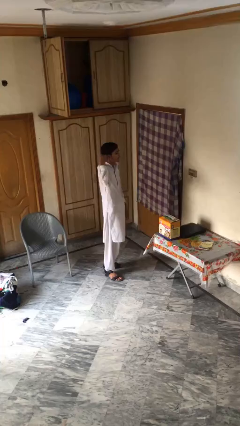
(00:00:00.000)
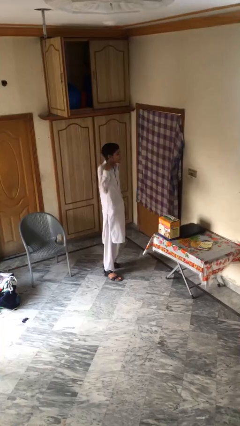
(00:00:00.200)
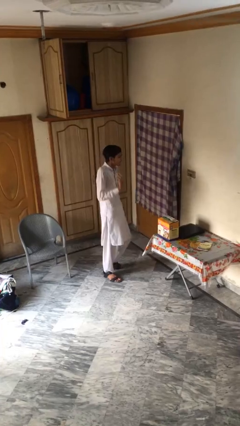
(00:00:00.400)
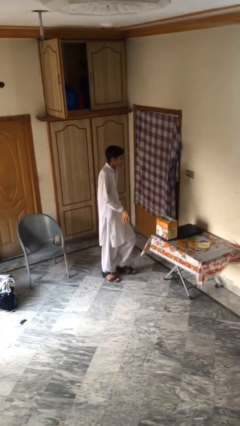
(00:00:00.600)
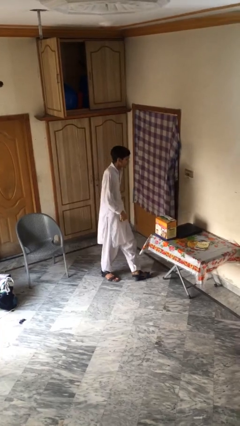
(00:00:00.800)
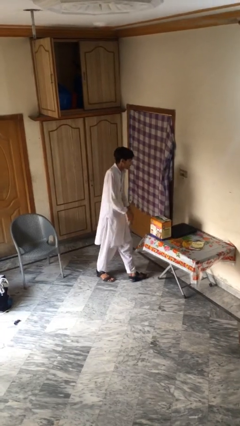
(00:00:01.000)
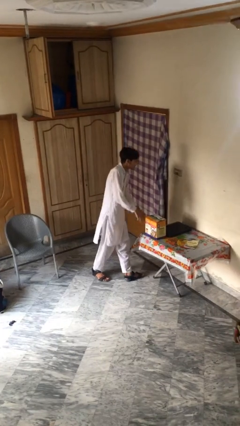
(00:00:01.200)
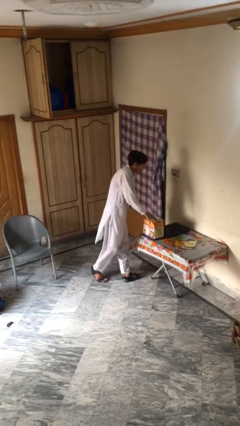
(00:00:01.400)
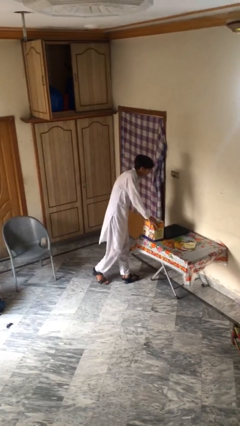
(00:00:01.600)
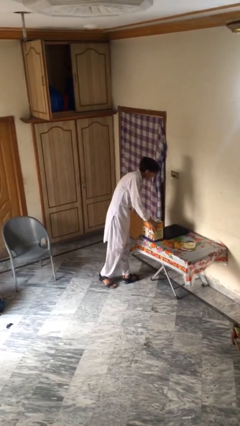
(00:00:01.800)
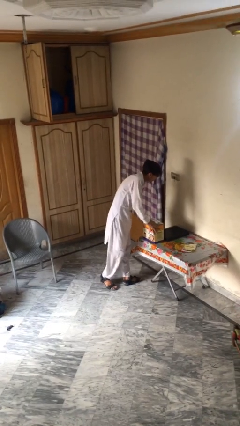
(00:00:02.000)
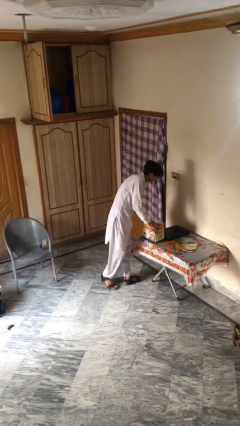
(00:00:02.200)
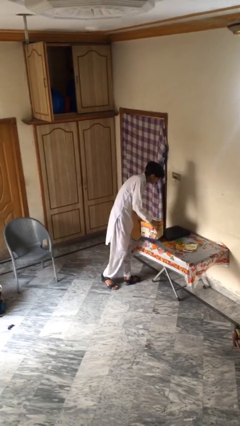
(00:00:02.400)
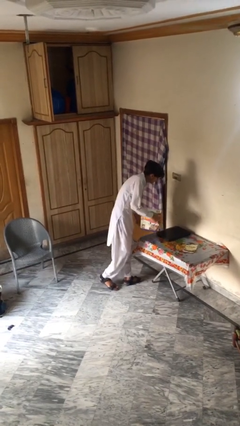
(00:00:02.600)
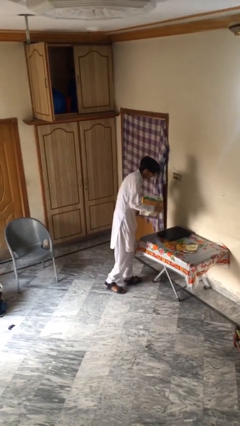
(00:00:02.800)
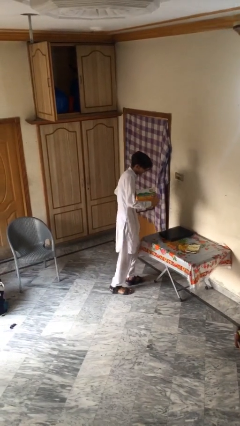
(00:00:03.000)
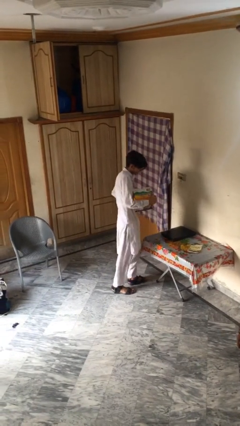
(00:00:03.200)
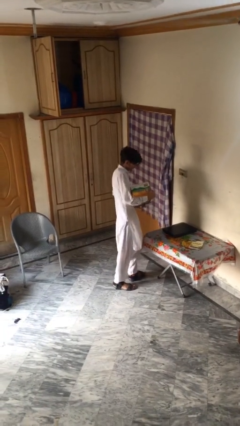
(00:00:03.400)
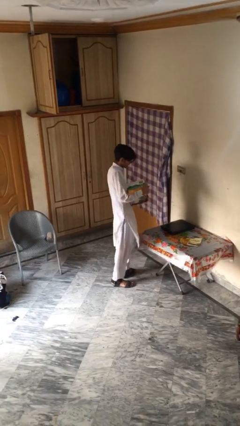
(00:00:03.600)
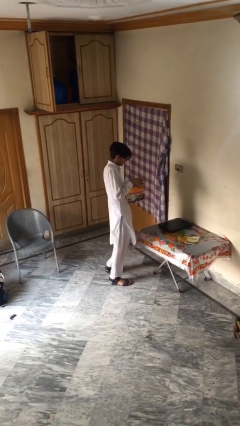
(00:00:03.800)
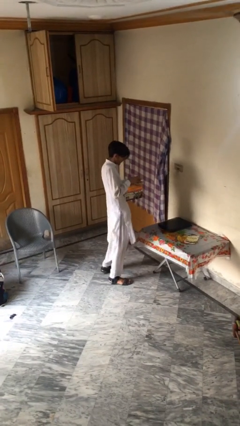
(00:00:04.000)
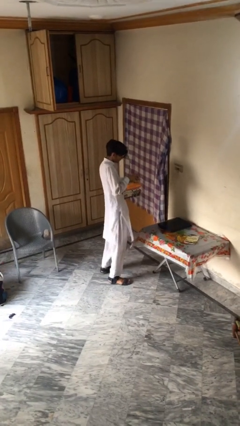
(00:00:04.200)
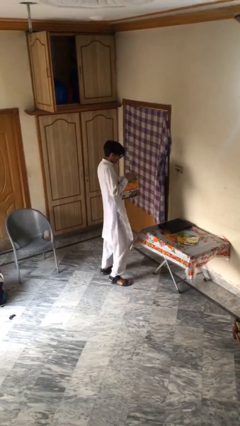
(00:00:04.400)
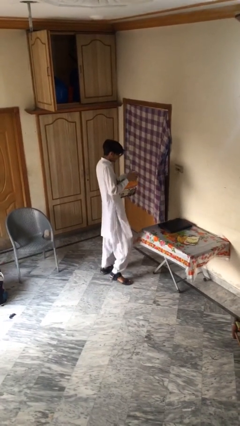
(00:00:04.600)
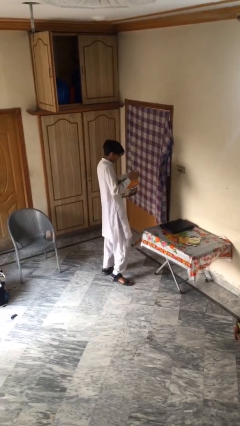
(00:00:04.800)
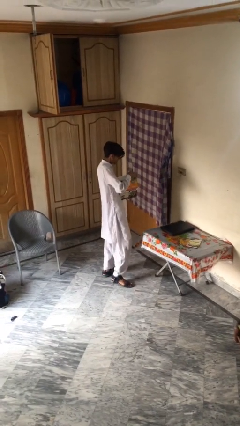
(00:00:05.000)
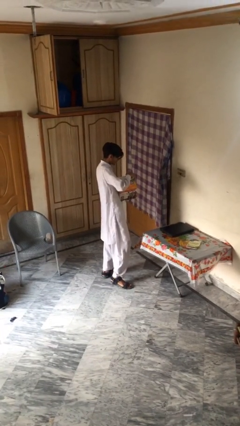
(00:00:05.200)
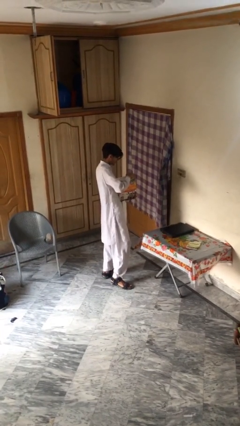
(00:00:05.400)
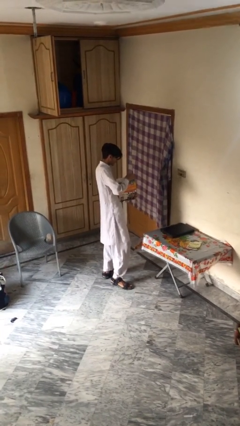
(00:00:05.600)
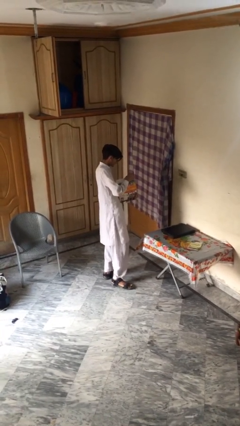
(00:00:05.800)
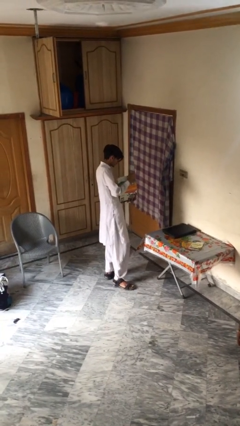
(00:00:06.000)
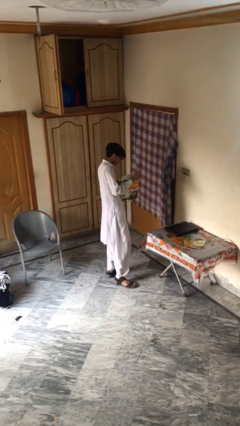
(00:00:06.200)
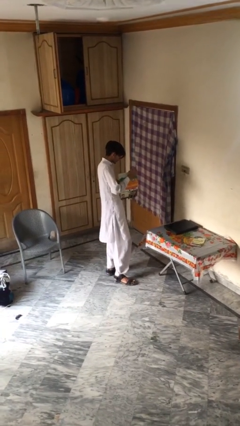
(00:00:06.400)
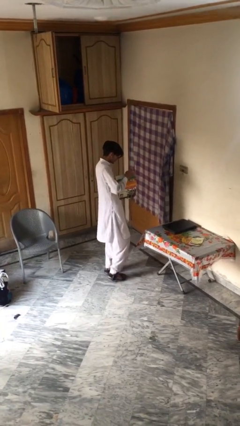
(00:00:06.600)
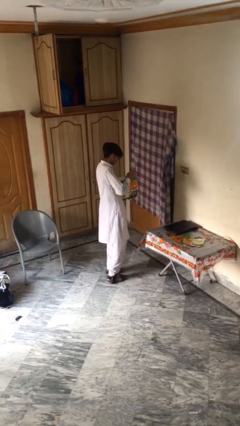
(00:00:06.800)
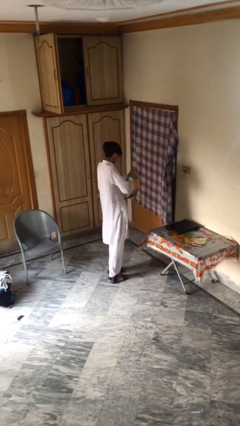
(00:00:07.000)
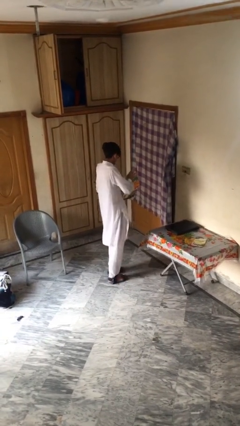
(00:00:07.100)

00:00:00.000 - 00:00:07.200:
person picks up object from table

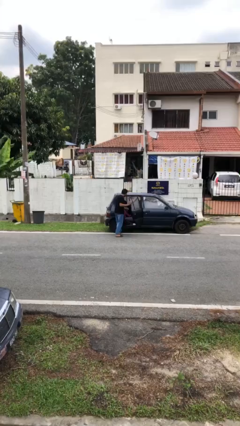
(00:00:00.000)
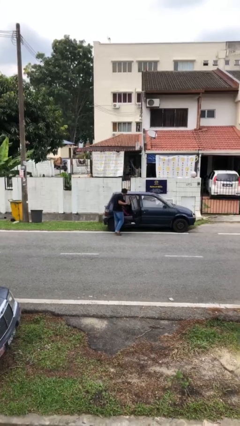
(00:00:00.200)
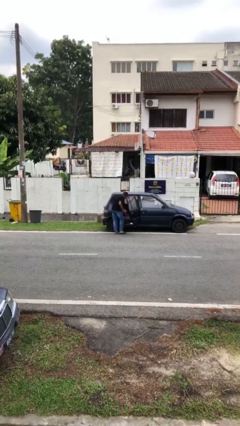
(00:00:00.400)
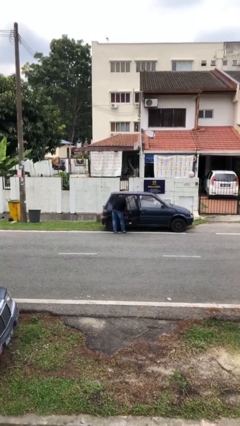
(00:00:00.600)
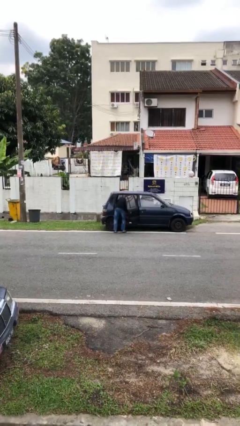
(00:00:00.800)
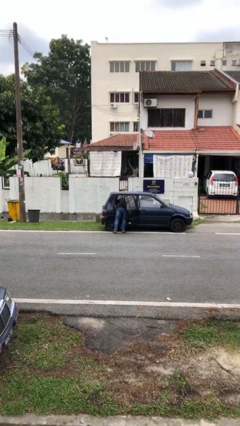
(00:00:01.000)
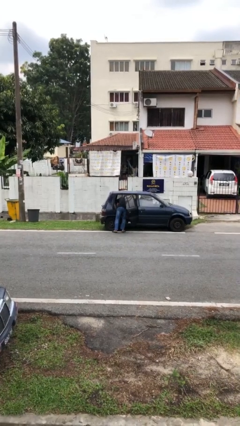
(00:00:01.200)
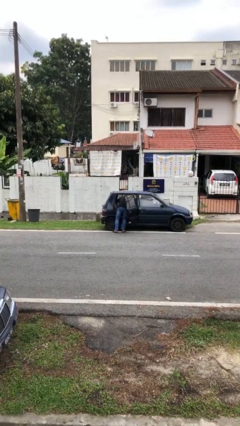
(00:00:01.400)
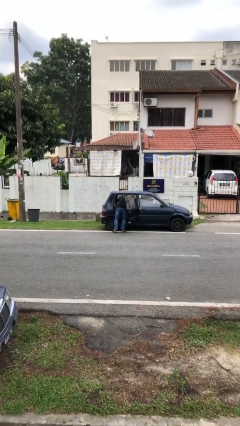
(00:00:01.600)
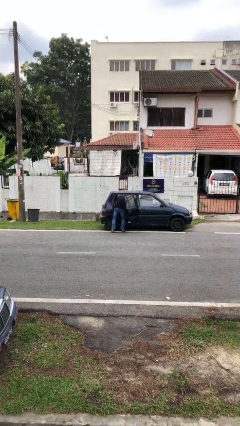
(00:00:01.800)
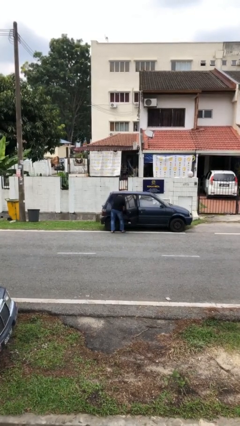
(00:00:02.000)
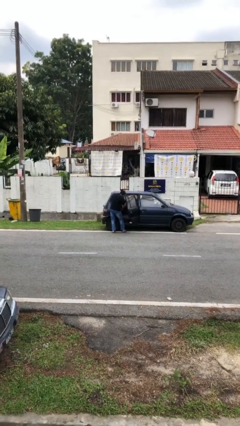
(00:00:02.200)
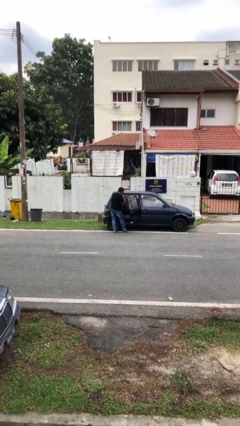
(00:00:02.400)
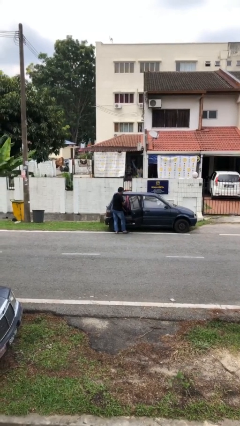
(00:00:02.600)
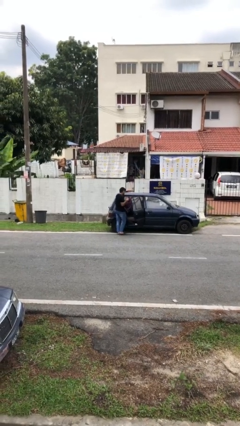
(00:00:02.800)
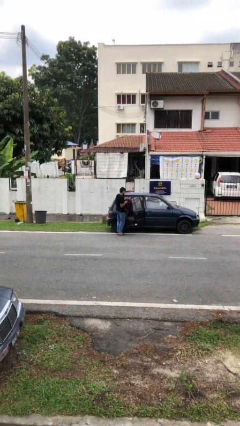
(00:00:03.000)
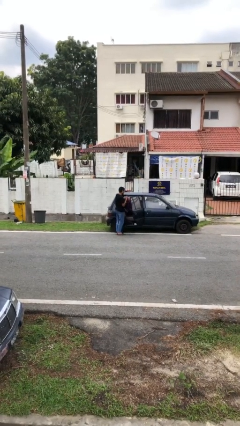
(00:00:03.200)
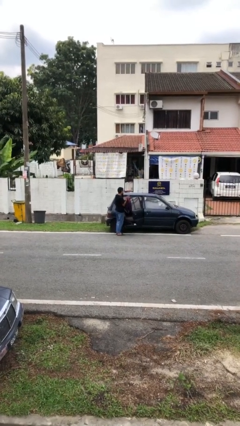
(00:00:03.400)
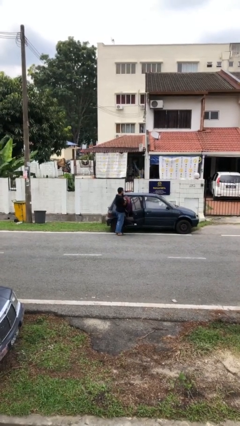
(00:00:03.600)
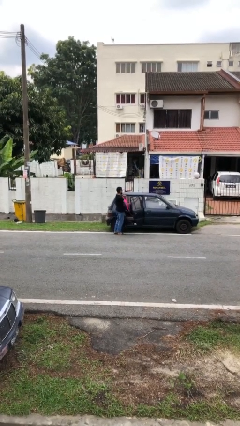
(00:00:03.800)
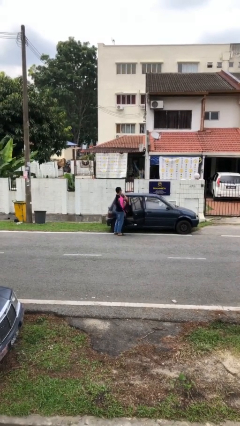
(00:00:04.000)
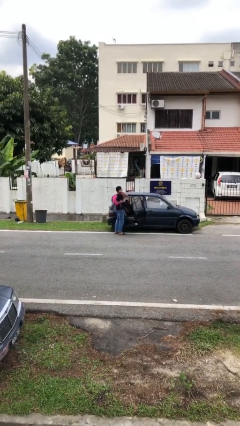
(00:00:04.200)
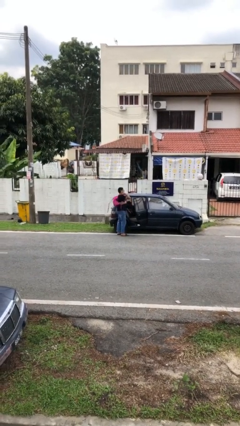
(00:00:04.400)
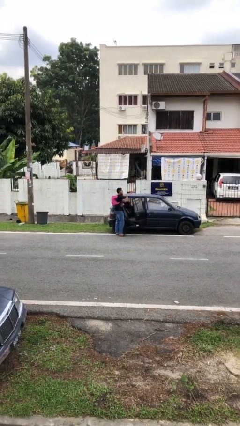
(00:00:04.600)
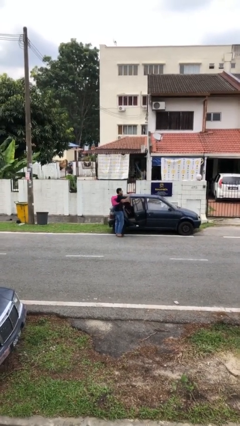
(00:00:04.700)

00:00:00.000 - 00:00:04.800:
person unloads car

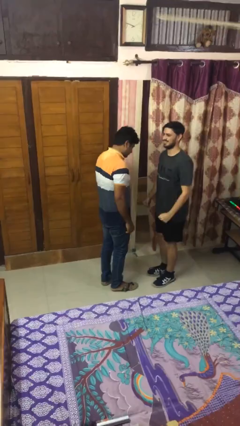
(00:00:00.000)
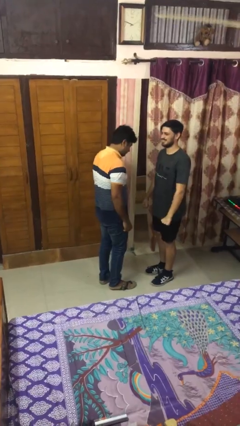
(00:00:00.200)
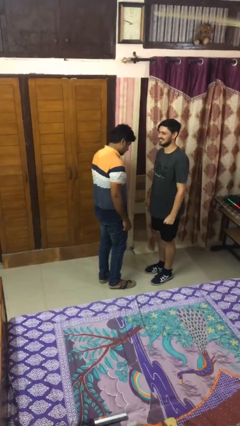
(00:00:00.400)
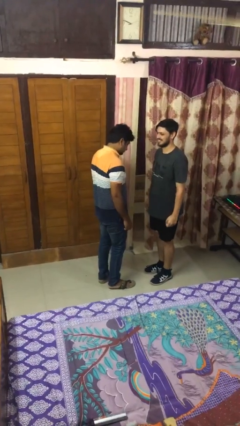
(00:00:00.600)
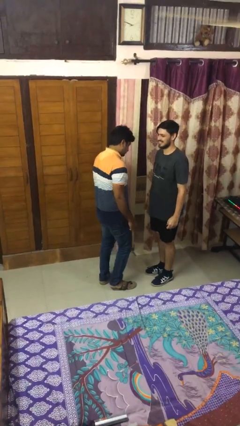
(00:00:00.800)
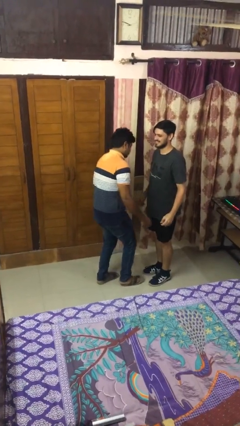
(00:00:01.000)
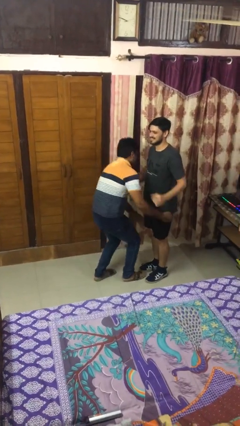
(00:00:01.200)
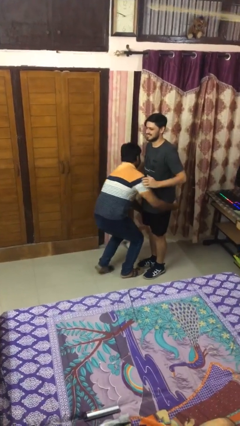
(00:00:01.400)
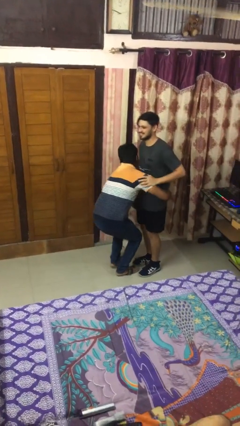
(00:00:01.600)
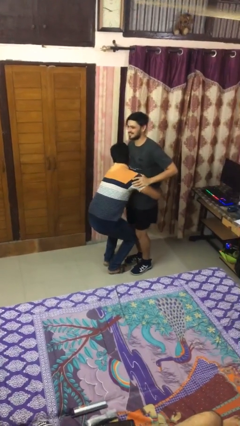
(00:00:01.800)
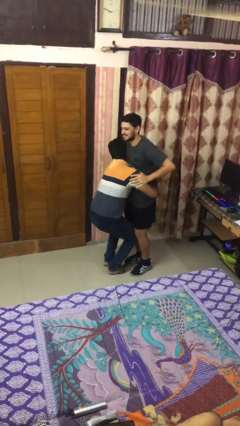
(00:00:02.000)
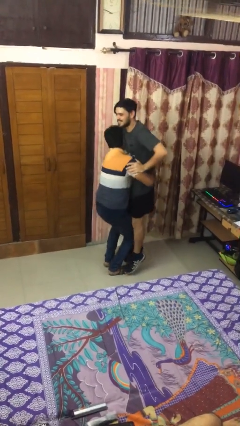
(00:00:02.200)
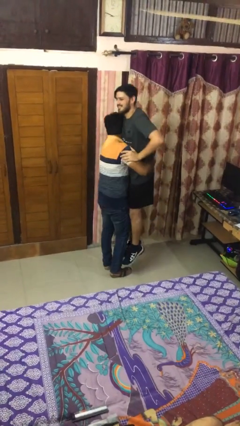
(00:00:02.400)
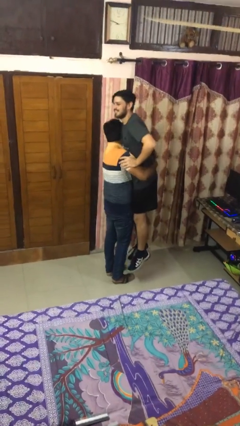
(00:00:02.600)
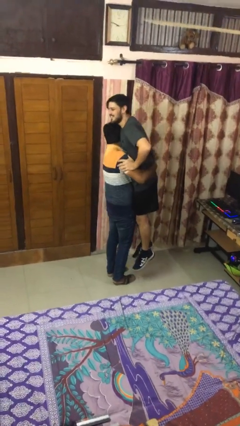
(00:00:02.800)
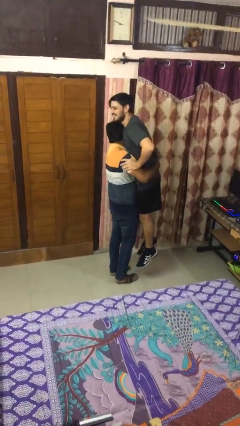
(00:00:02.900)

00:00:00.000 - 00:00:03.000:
person picks up person

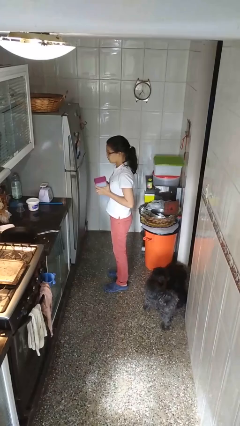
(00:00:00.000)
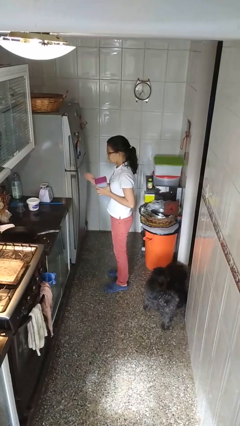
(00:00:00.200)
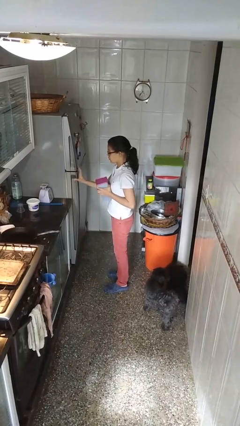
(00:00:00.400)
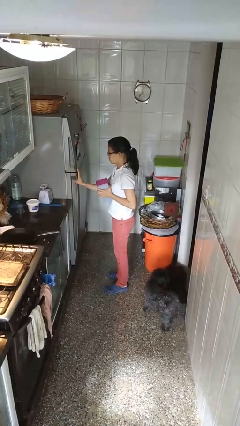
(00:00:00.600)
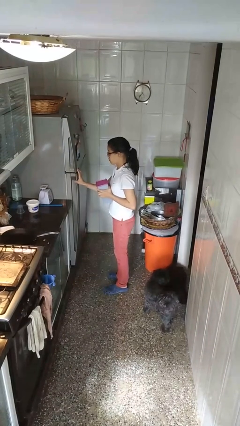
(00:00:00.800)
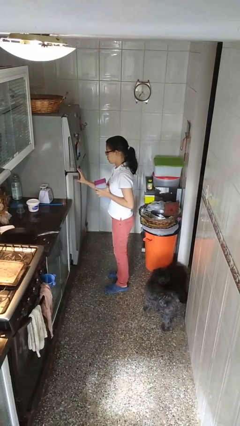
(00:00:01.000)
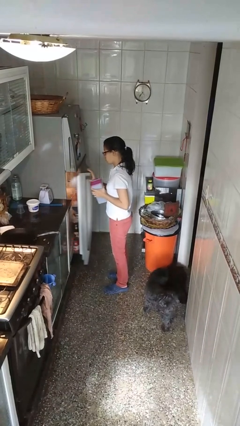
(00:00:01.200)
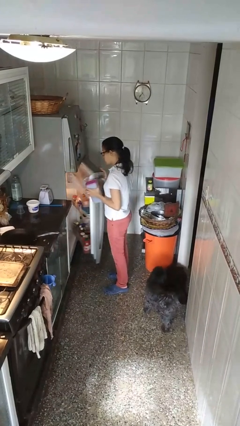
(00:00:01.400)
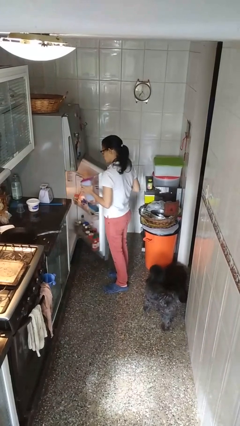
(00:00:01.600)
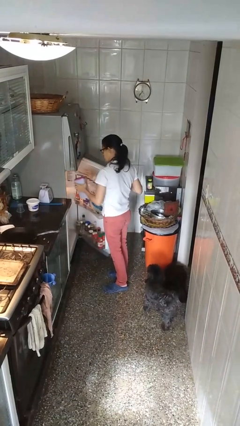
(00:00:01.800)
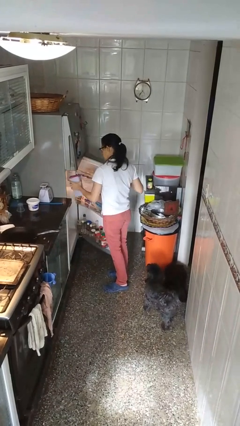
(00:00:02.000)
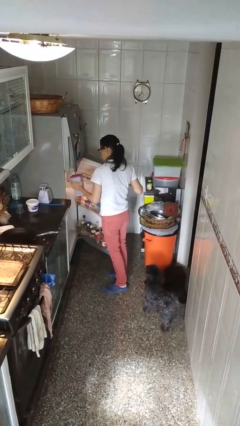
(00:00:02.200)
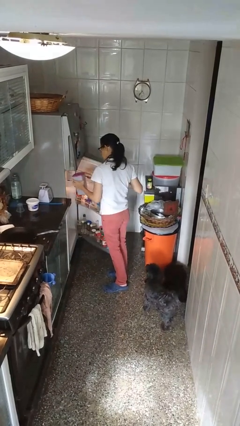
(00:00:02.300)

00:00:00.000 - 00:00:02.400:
person opens refrigerator
